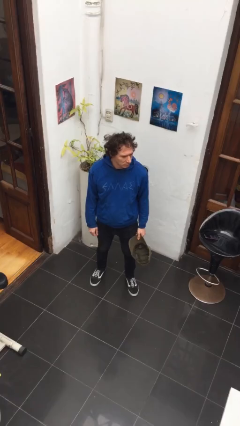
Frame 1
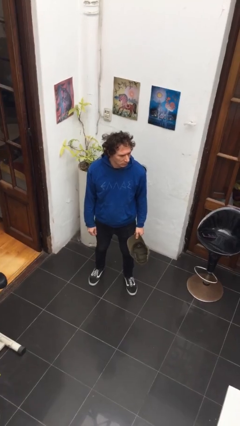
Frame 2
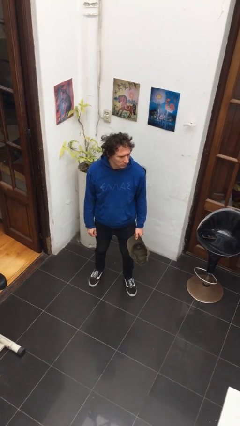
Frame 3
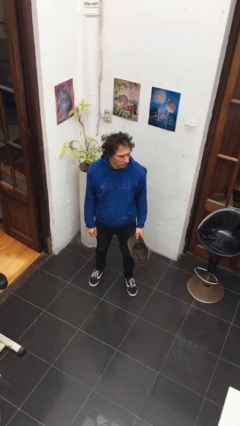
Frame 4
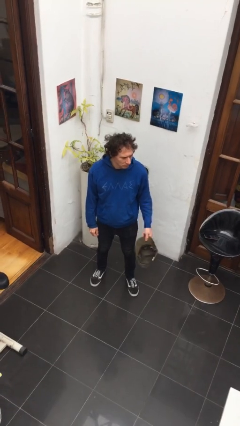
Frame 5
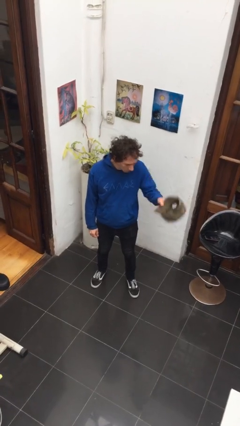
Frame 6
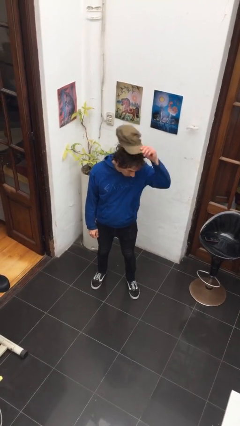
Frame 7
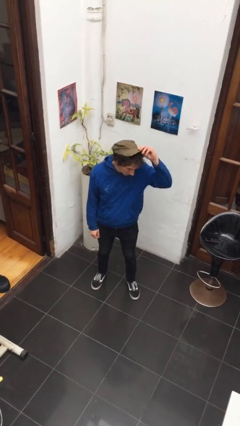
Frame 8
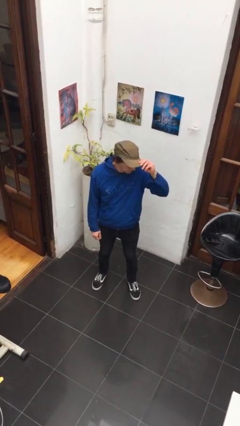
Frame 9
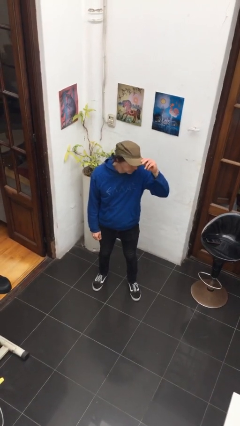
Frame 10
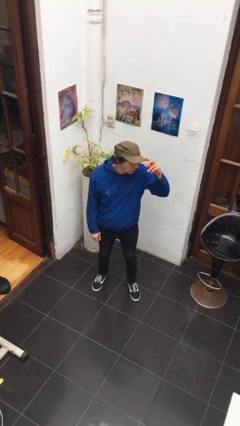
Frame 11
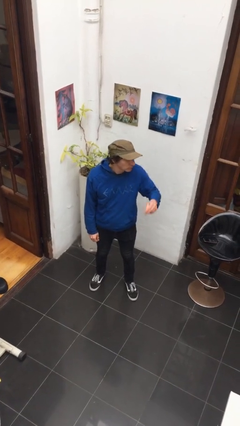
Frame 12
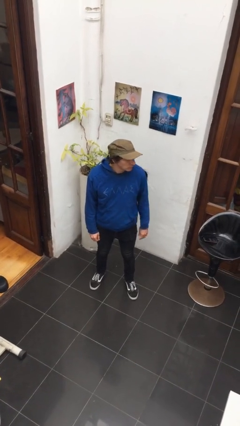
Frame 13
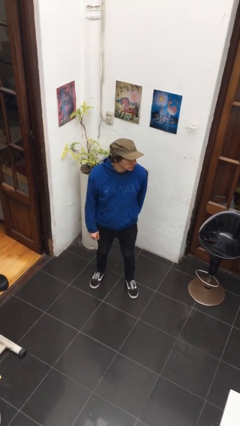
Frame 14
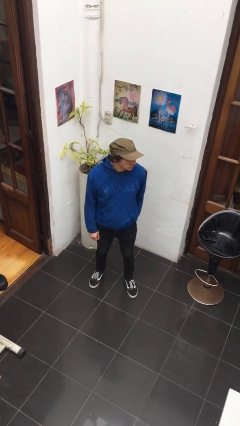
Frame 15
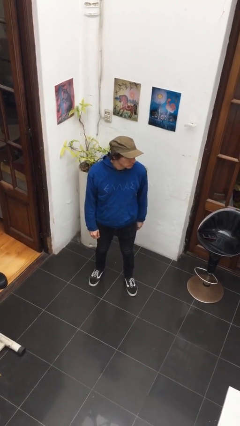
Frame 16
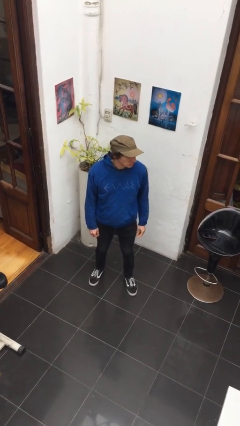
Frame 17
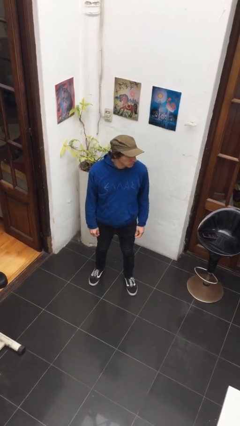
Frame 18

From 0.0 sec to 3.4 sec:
person puts on hat

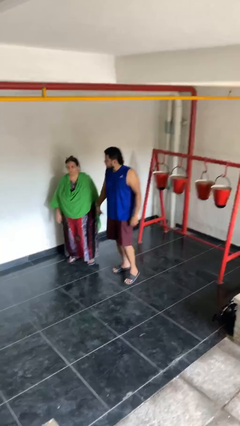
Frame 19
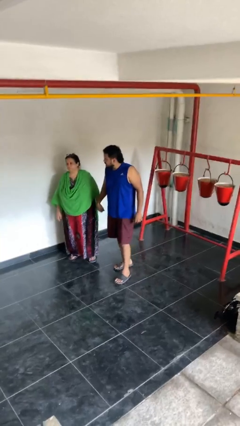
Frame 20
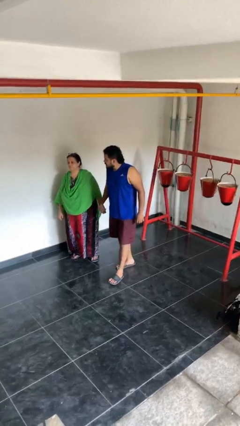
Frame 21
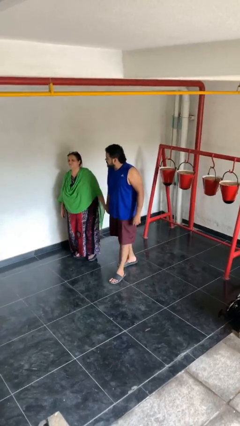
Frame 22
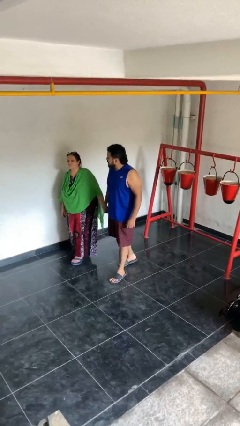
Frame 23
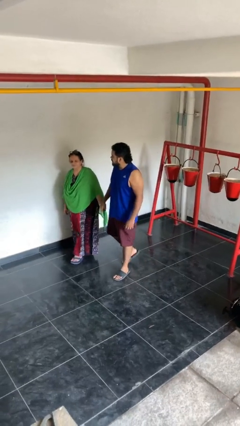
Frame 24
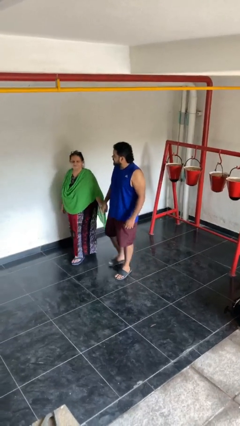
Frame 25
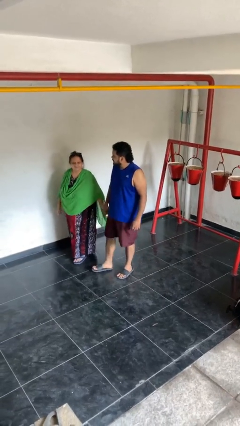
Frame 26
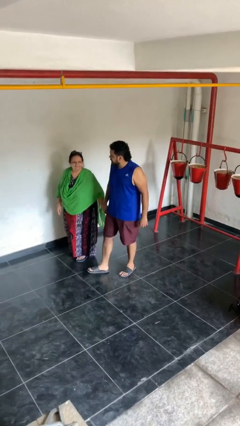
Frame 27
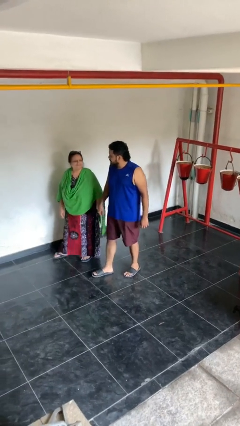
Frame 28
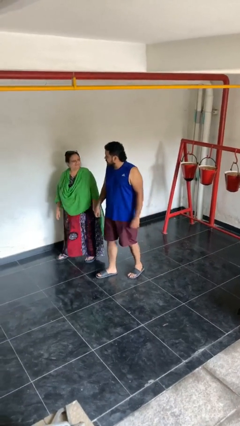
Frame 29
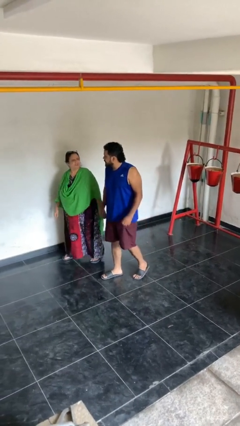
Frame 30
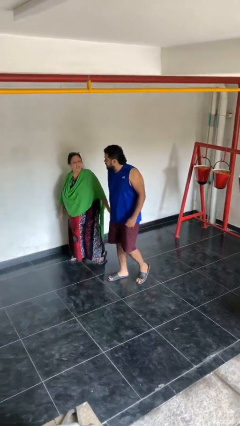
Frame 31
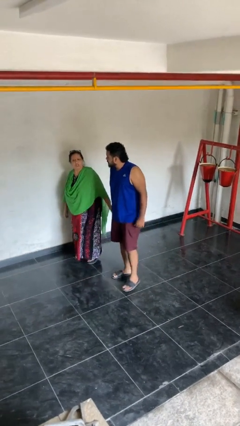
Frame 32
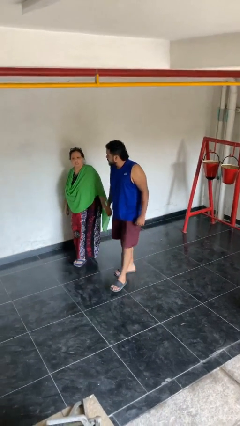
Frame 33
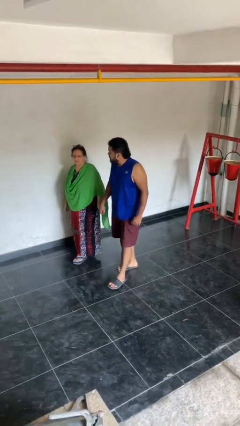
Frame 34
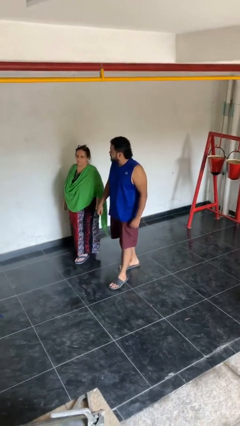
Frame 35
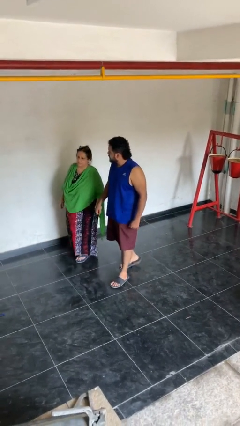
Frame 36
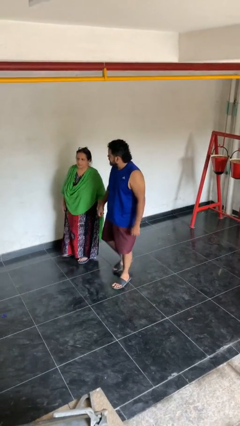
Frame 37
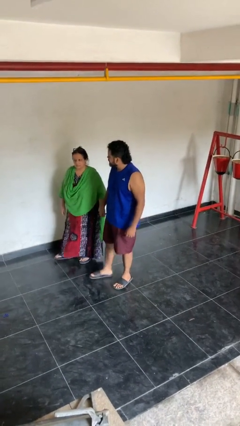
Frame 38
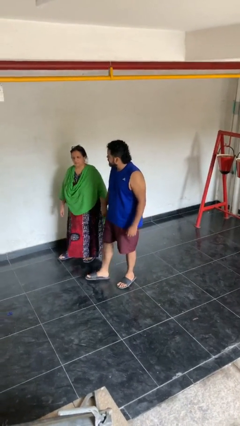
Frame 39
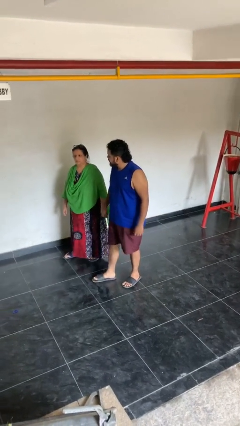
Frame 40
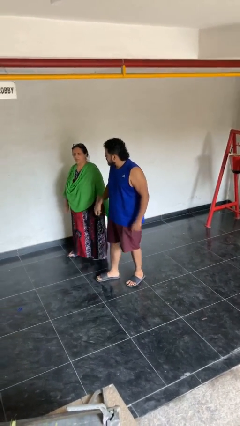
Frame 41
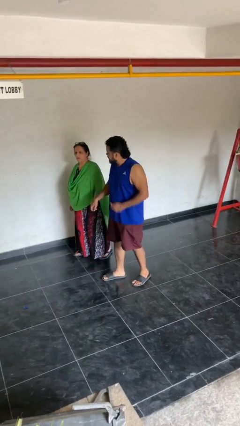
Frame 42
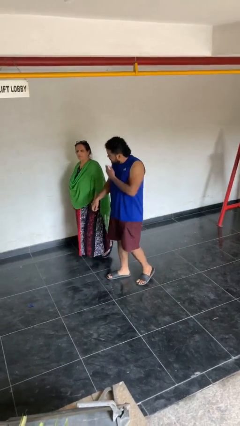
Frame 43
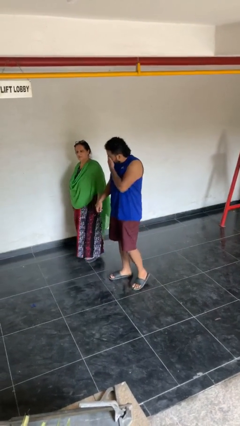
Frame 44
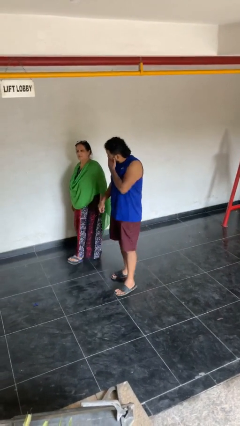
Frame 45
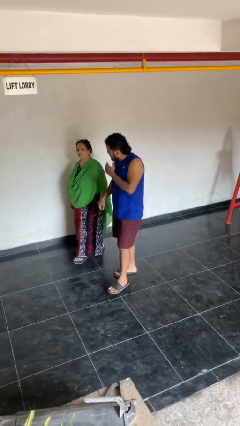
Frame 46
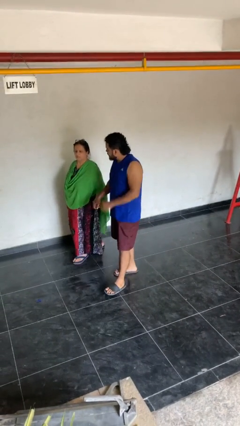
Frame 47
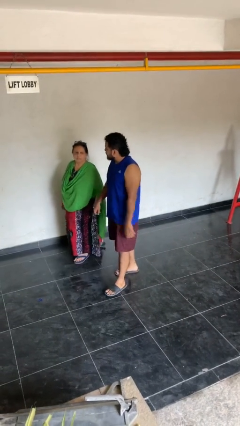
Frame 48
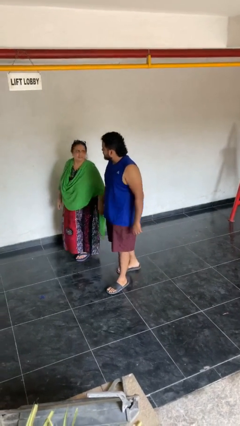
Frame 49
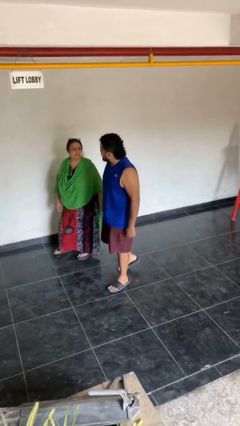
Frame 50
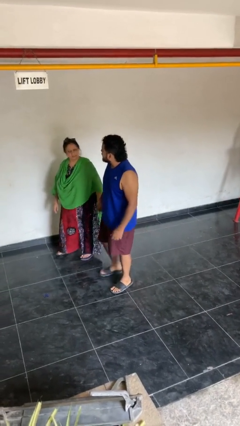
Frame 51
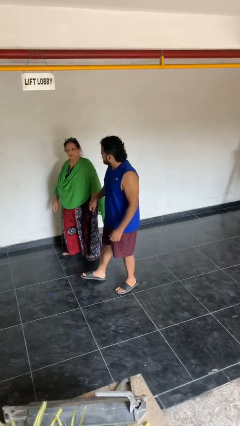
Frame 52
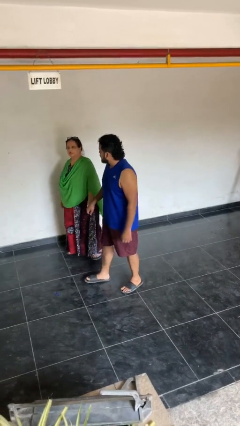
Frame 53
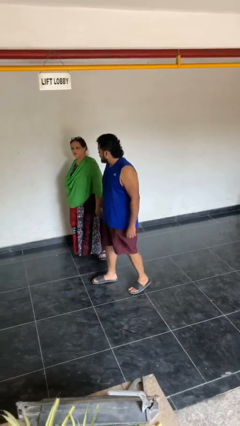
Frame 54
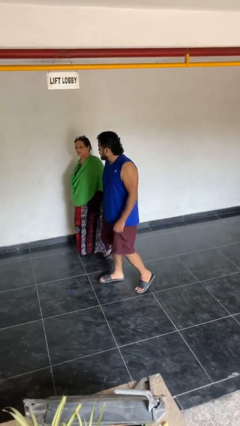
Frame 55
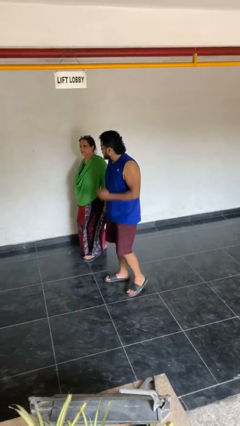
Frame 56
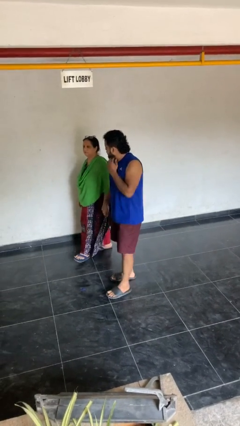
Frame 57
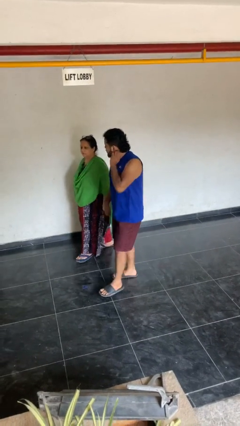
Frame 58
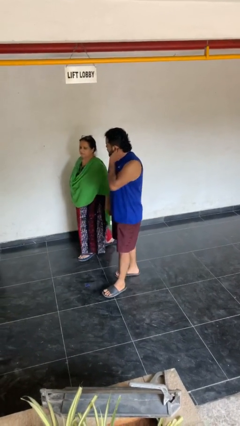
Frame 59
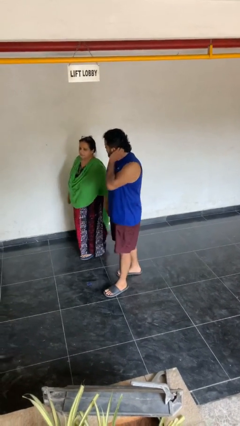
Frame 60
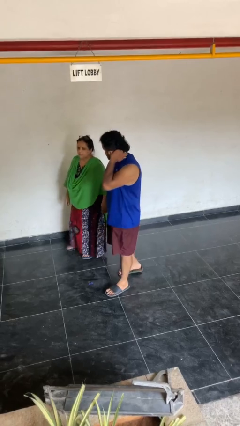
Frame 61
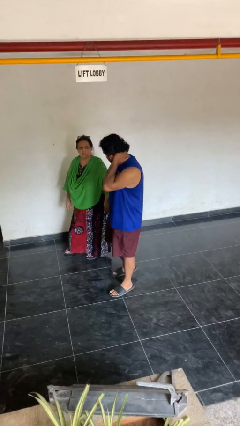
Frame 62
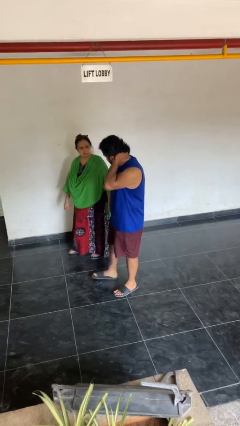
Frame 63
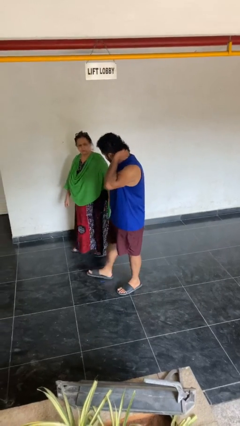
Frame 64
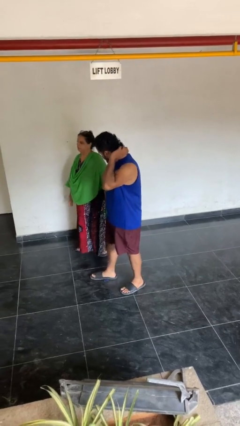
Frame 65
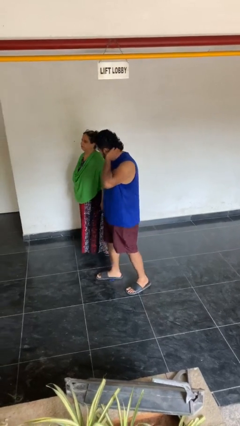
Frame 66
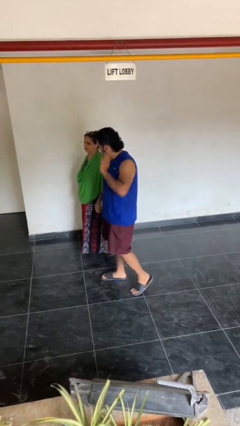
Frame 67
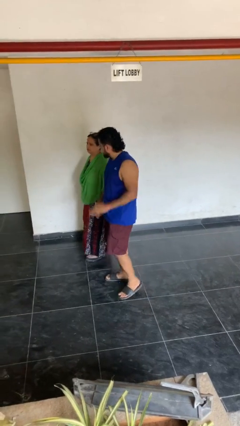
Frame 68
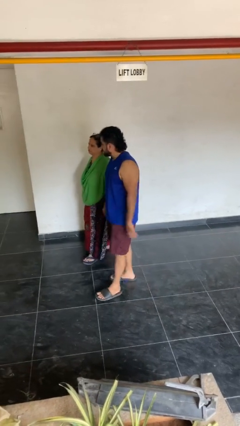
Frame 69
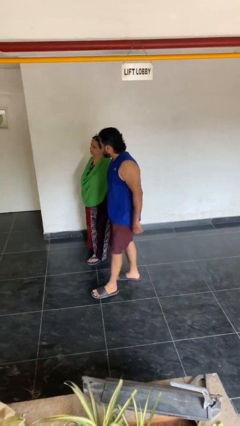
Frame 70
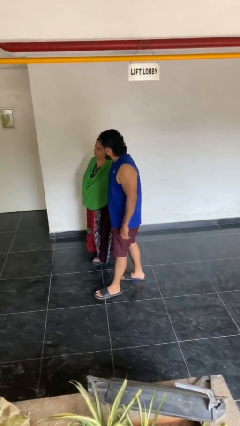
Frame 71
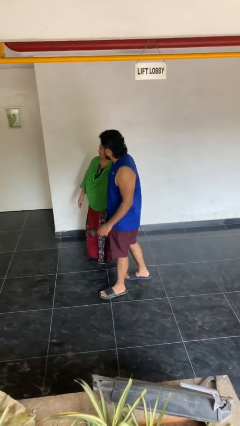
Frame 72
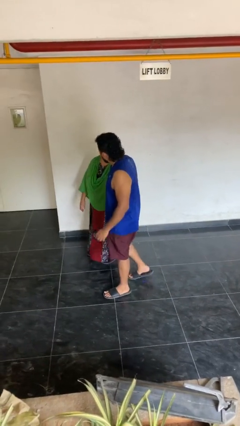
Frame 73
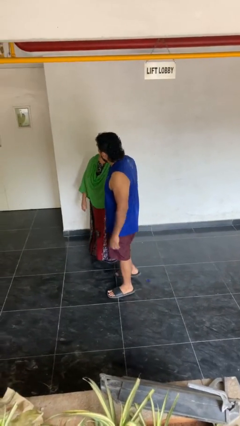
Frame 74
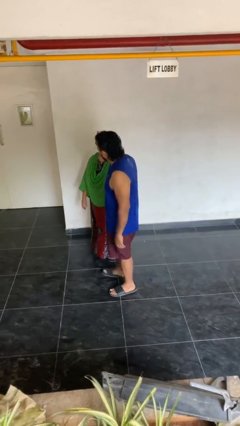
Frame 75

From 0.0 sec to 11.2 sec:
person holds hand

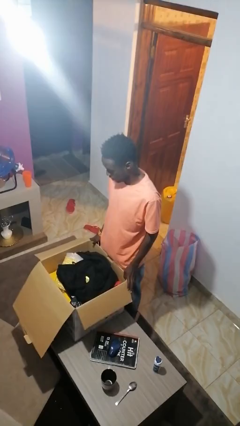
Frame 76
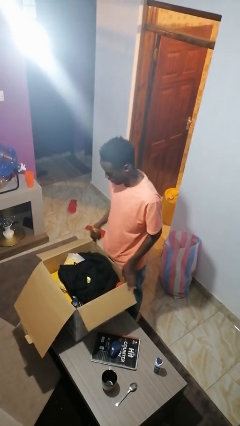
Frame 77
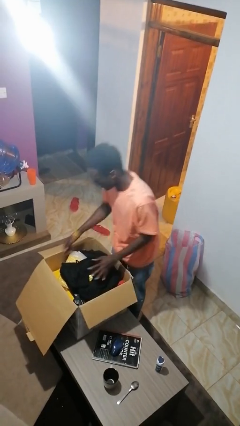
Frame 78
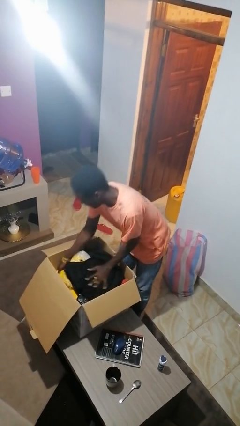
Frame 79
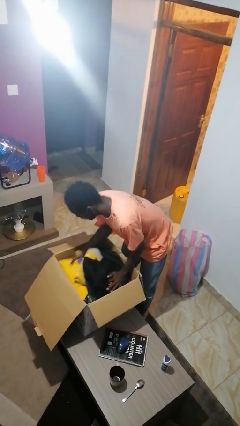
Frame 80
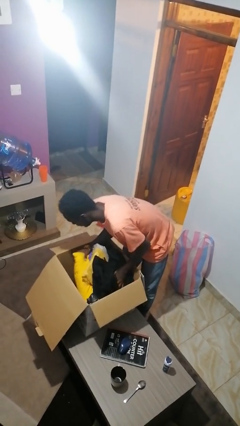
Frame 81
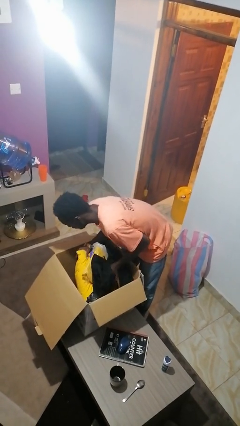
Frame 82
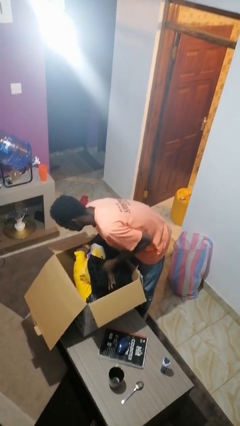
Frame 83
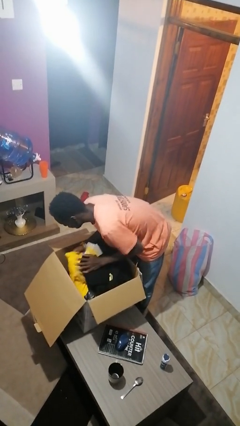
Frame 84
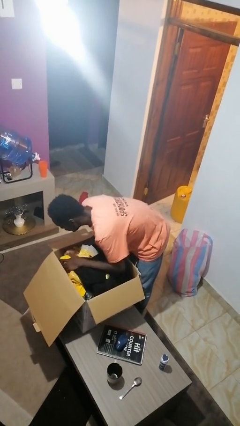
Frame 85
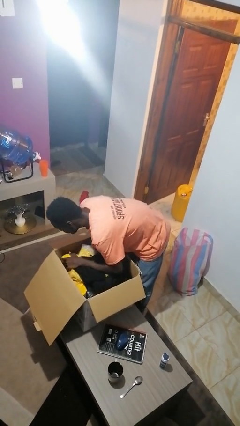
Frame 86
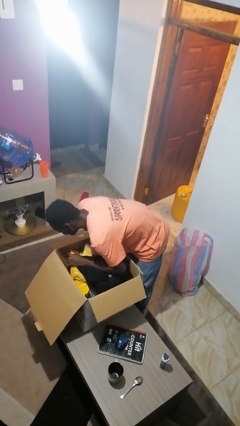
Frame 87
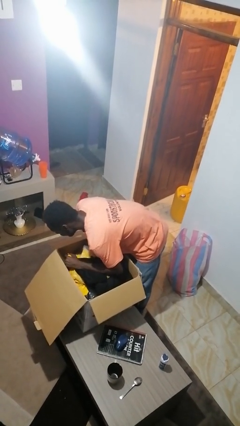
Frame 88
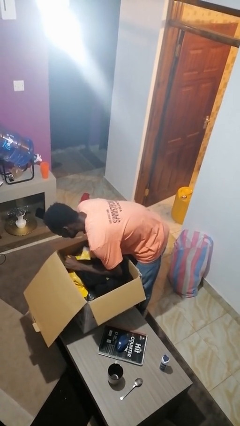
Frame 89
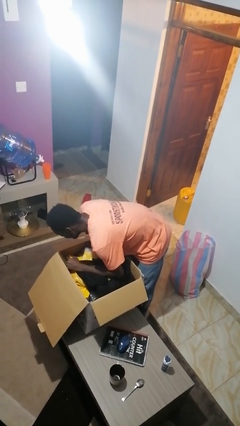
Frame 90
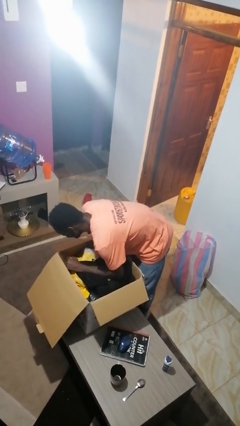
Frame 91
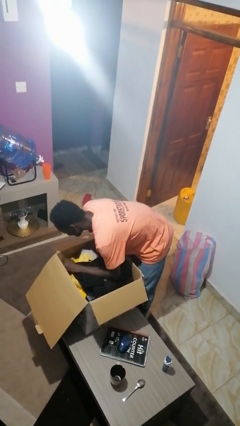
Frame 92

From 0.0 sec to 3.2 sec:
person searches in box

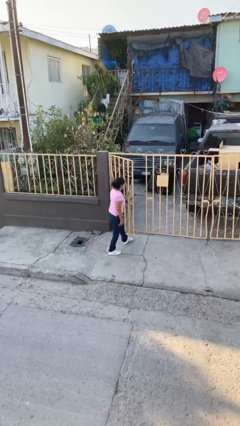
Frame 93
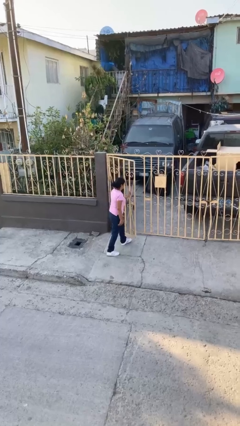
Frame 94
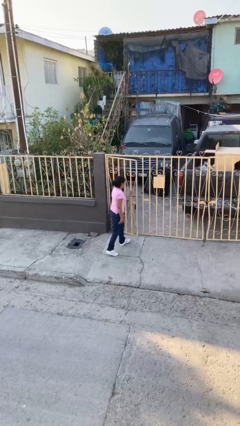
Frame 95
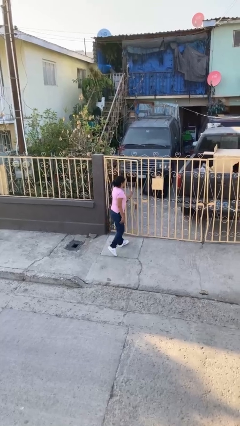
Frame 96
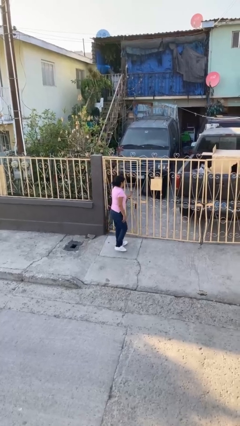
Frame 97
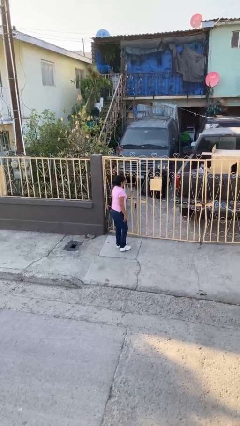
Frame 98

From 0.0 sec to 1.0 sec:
person closes facility door
